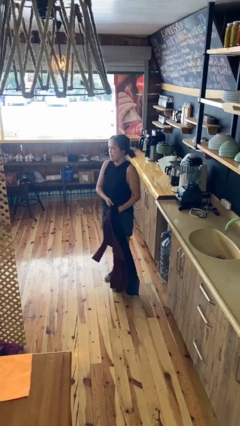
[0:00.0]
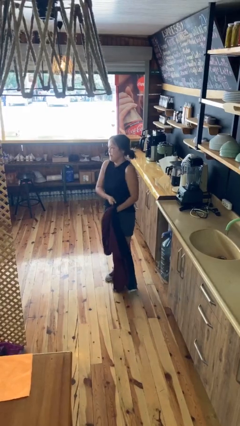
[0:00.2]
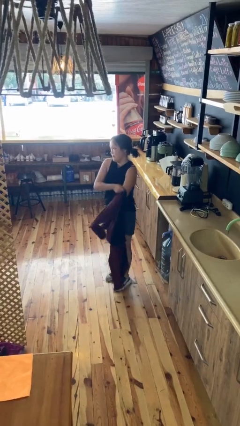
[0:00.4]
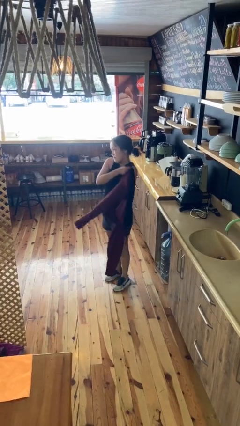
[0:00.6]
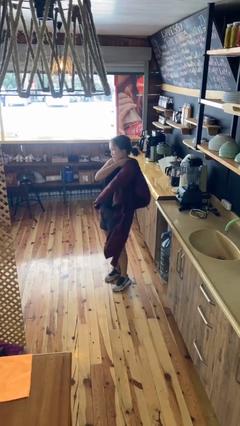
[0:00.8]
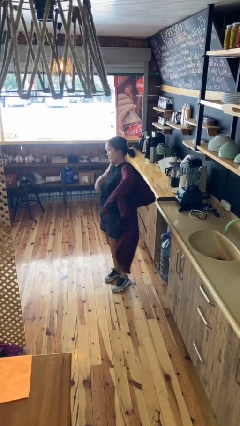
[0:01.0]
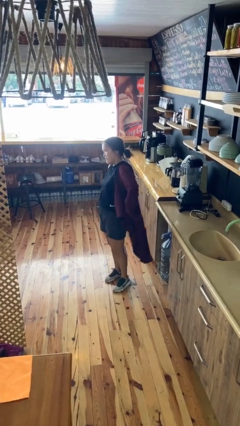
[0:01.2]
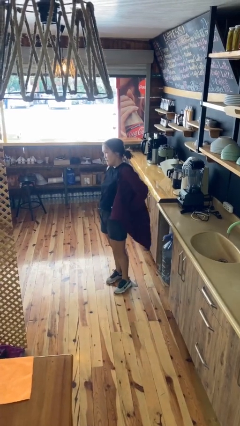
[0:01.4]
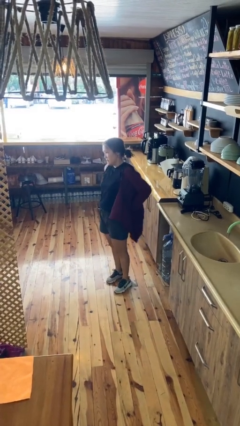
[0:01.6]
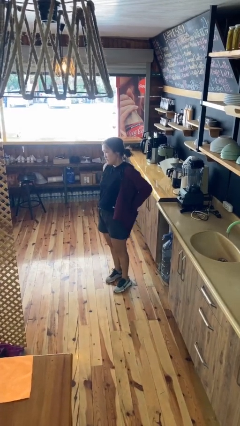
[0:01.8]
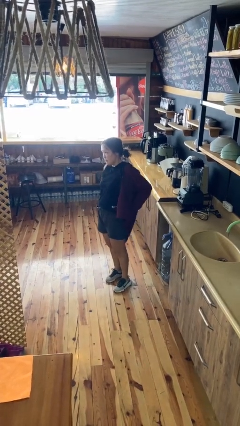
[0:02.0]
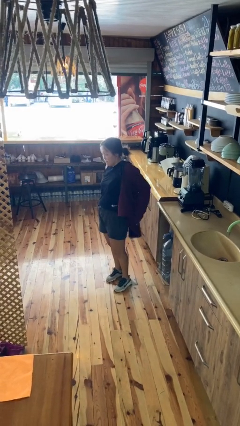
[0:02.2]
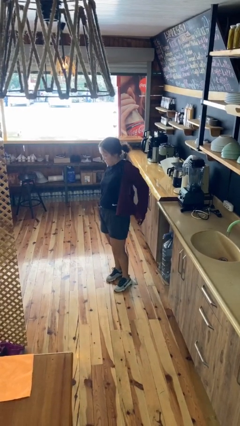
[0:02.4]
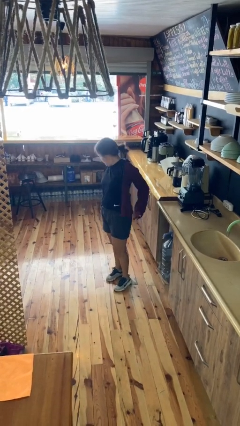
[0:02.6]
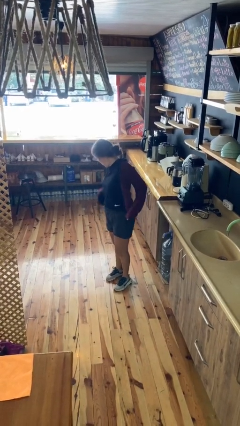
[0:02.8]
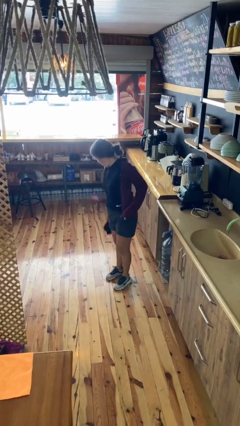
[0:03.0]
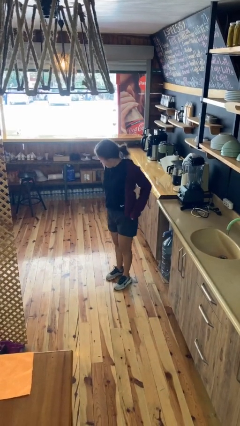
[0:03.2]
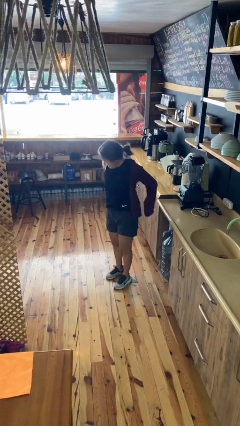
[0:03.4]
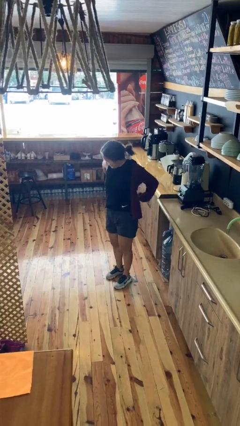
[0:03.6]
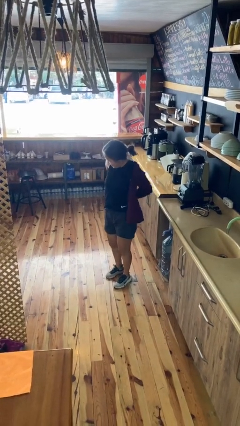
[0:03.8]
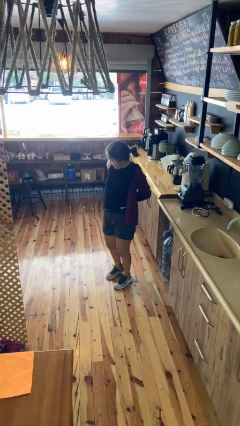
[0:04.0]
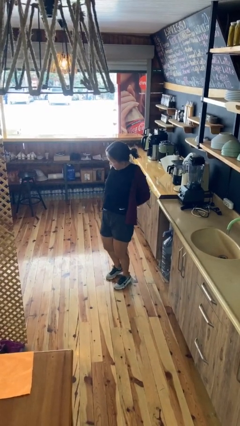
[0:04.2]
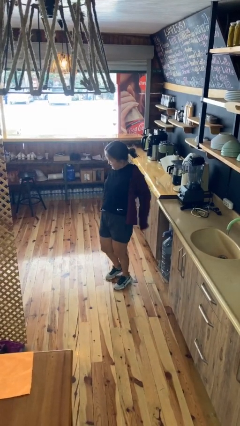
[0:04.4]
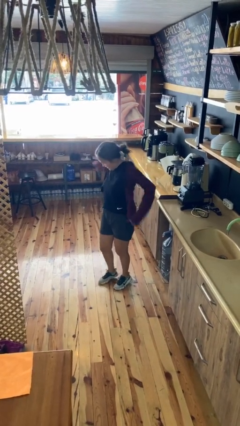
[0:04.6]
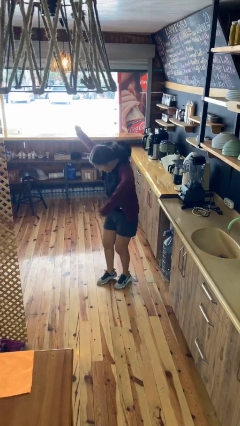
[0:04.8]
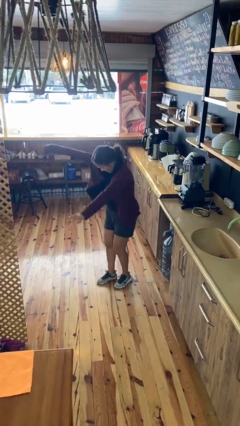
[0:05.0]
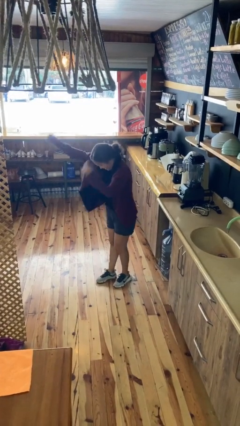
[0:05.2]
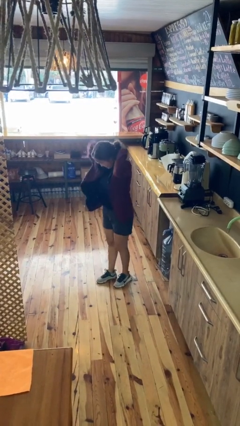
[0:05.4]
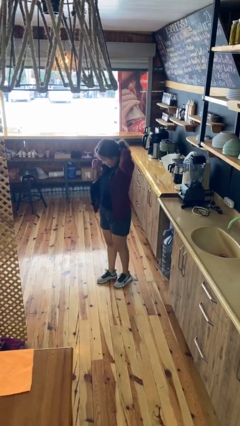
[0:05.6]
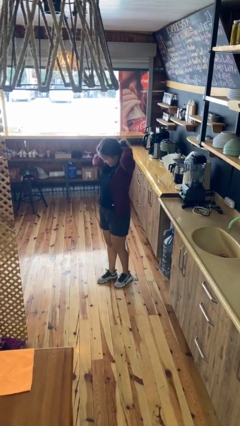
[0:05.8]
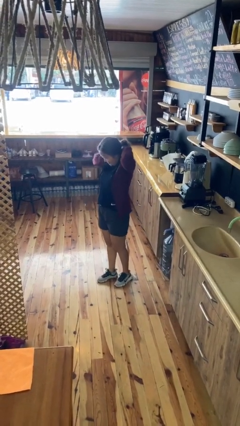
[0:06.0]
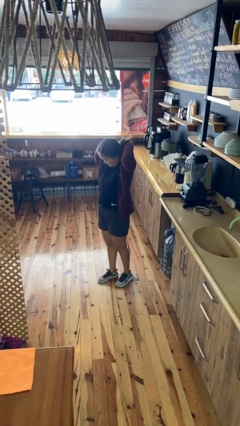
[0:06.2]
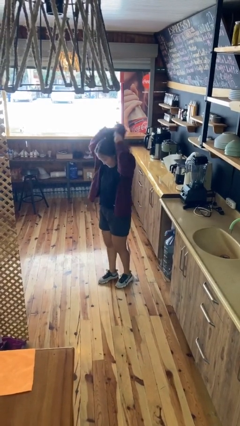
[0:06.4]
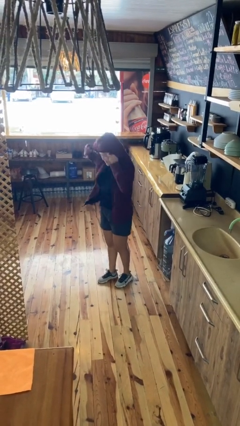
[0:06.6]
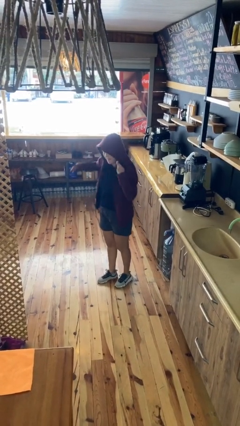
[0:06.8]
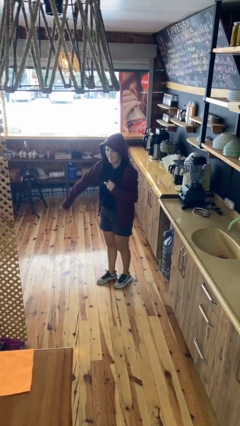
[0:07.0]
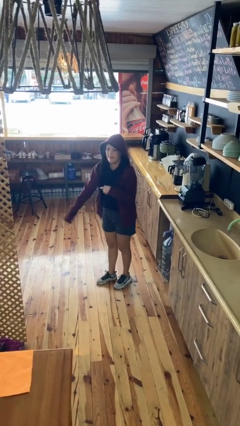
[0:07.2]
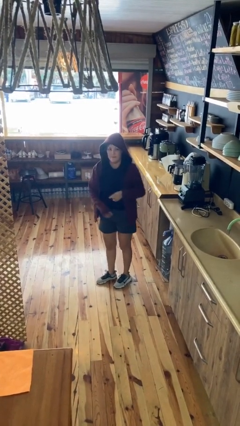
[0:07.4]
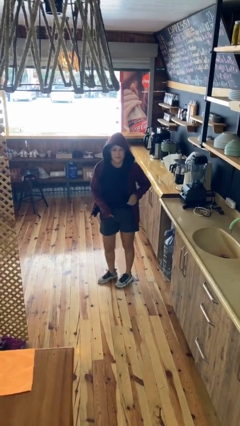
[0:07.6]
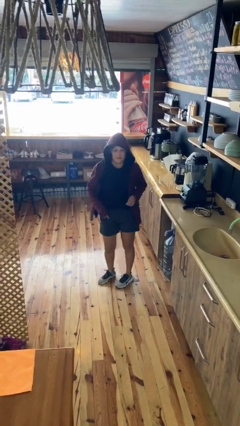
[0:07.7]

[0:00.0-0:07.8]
person puts on hoodie

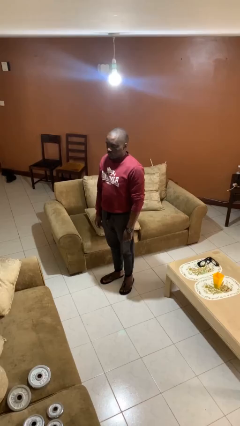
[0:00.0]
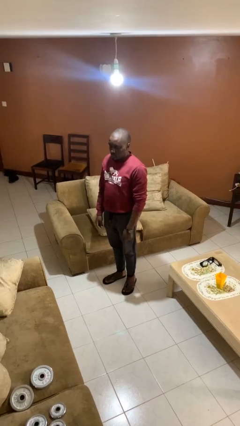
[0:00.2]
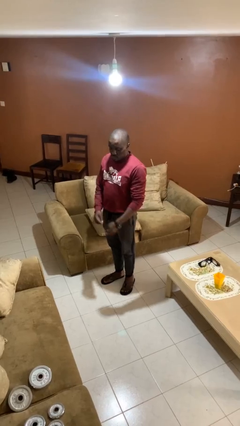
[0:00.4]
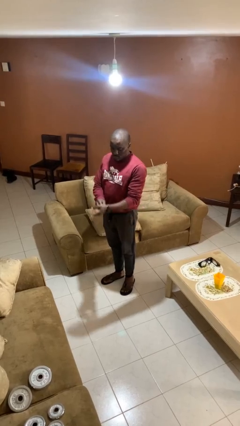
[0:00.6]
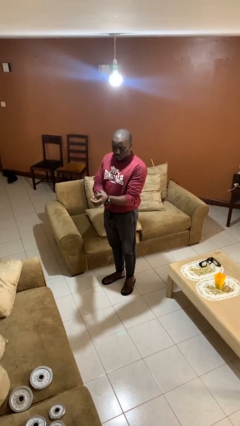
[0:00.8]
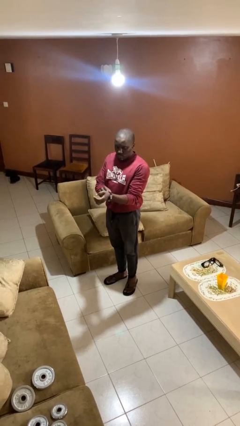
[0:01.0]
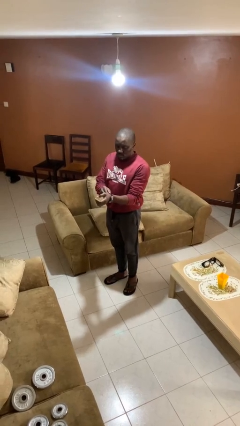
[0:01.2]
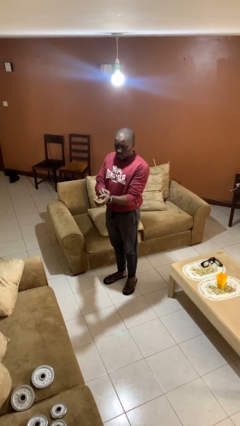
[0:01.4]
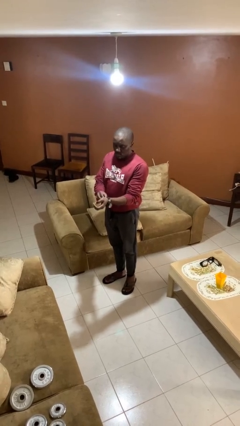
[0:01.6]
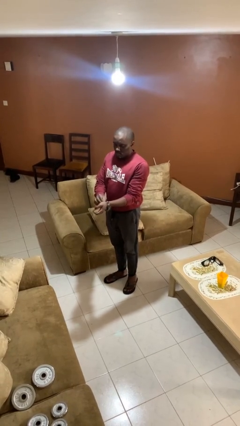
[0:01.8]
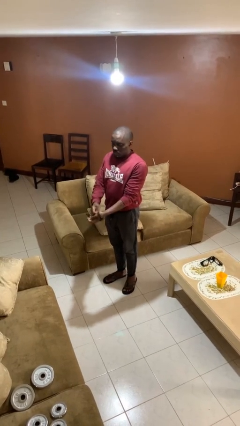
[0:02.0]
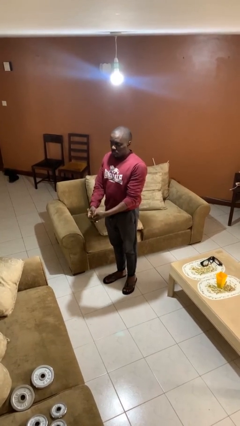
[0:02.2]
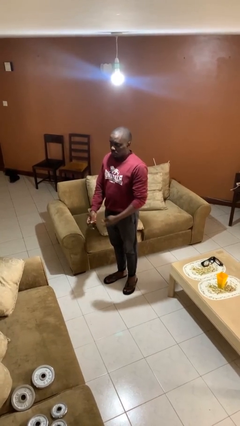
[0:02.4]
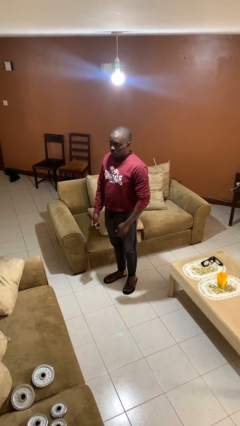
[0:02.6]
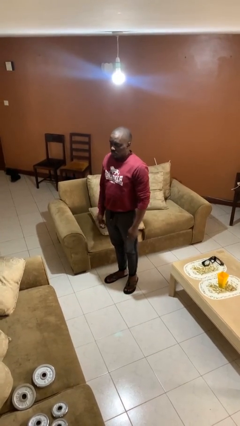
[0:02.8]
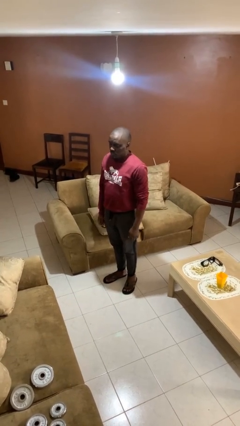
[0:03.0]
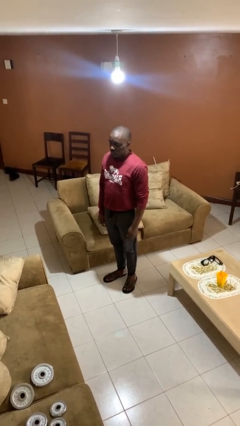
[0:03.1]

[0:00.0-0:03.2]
person takes off wristwatch

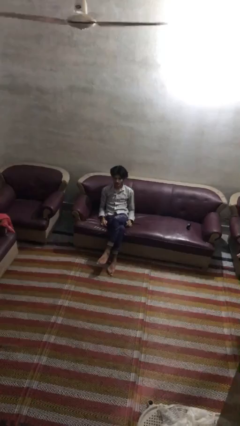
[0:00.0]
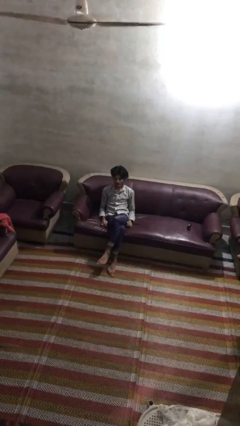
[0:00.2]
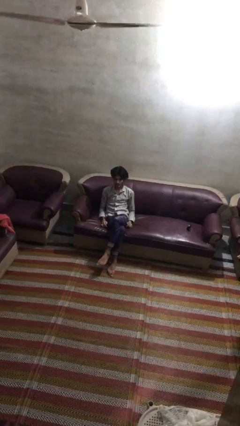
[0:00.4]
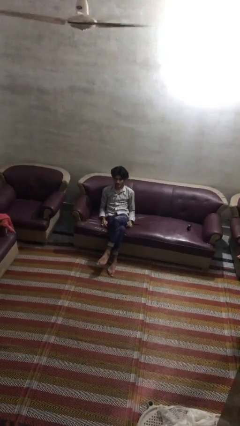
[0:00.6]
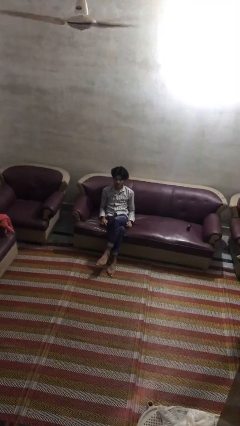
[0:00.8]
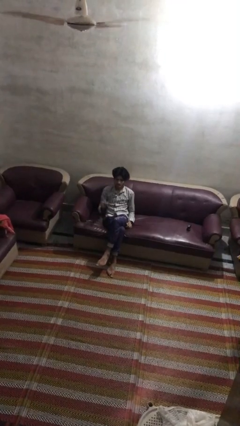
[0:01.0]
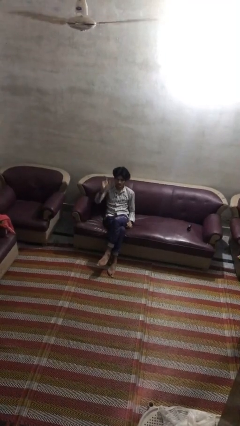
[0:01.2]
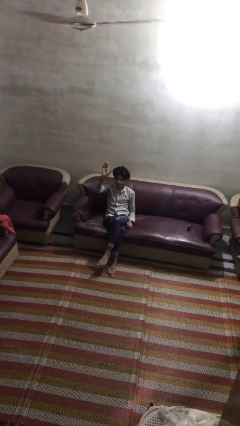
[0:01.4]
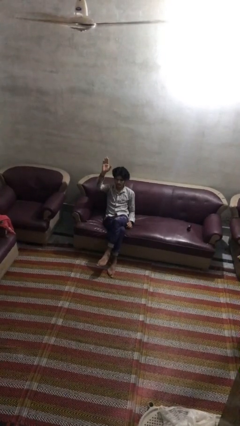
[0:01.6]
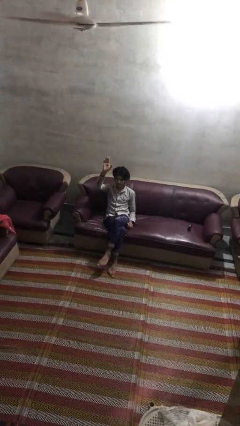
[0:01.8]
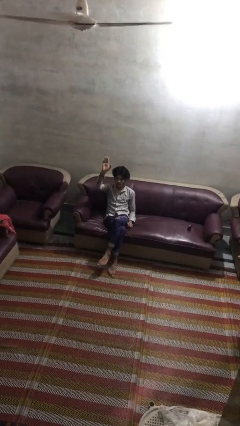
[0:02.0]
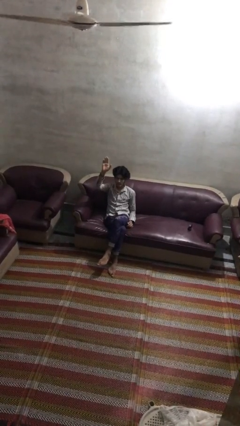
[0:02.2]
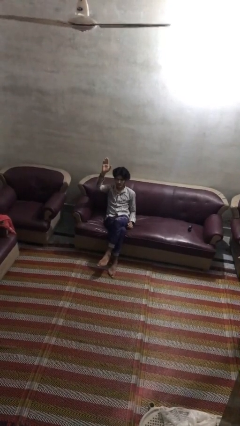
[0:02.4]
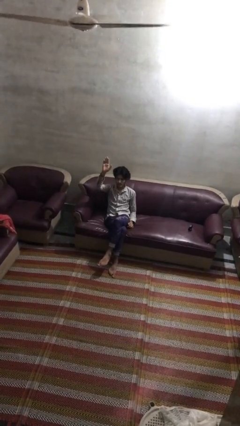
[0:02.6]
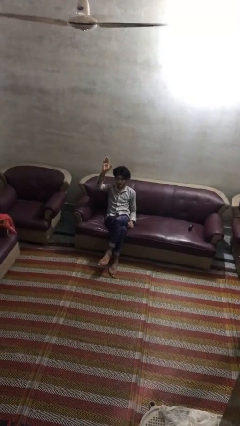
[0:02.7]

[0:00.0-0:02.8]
person gestures raise hand

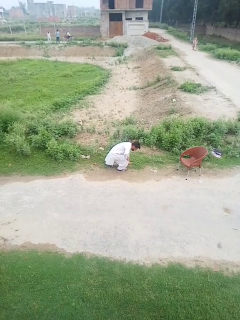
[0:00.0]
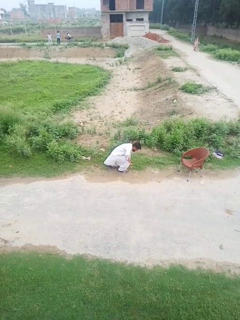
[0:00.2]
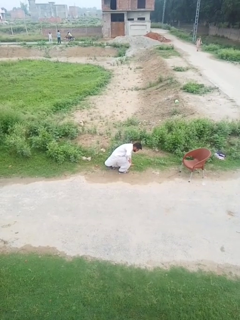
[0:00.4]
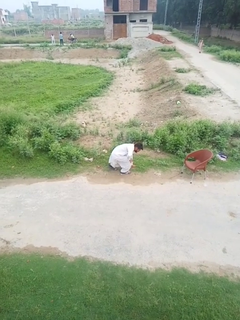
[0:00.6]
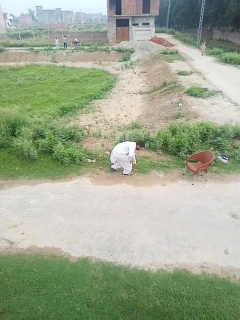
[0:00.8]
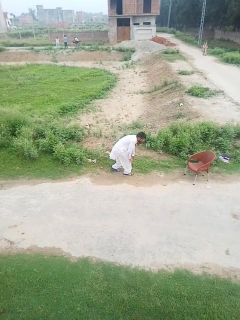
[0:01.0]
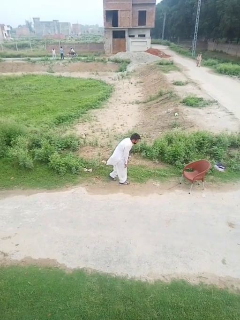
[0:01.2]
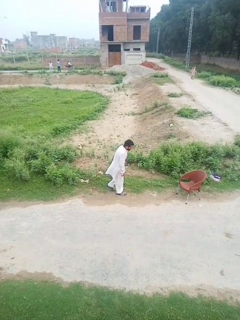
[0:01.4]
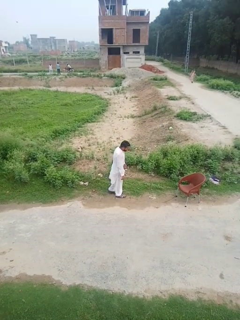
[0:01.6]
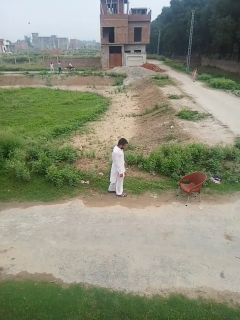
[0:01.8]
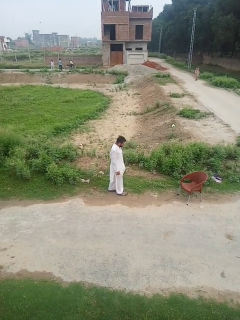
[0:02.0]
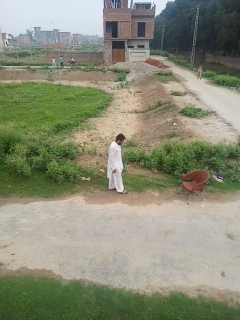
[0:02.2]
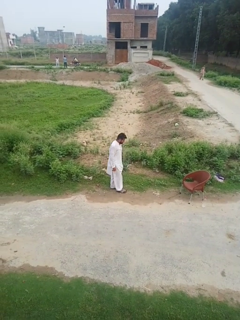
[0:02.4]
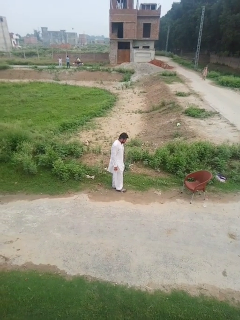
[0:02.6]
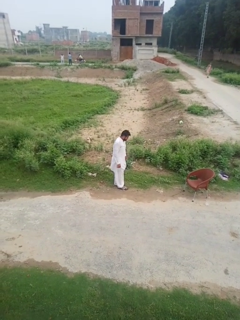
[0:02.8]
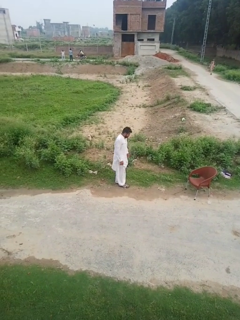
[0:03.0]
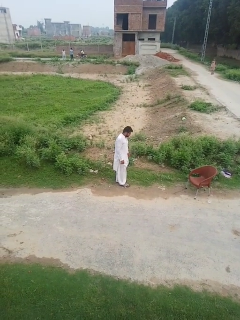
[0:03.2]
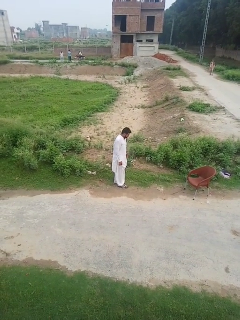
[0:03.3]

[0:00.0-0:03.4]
person stands up from floor

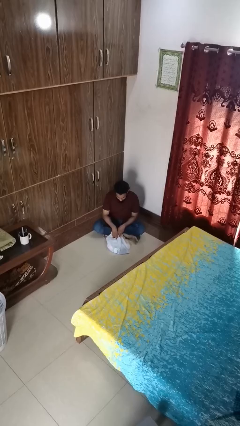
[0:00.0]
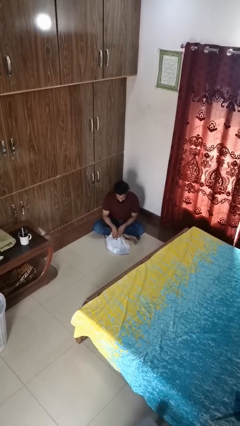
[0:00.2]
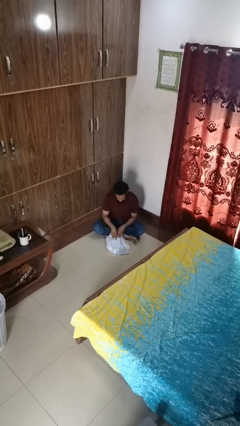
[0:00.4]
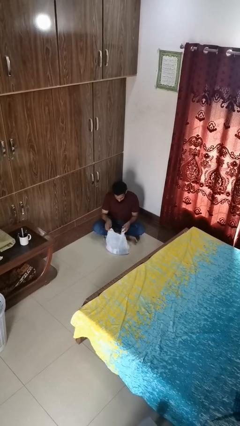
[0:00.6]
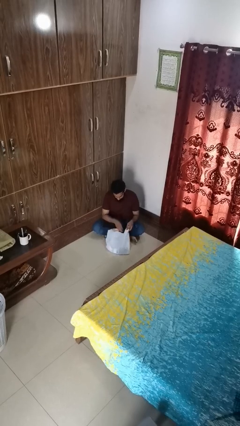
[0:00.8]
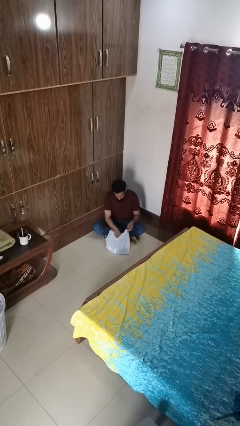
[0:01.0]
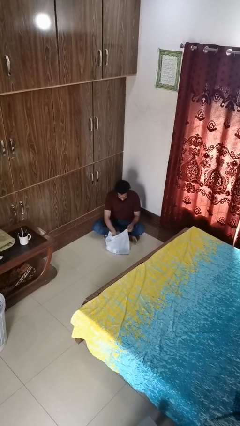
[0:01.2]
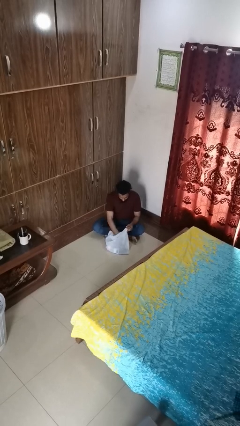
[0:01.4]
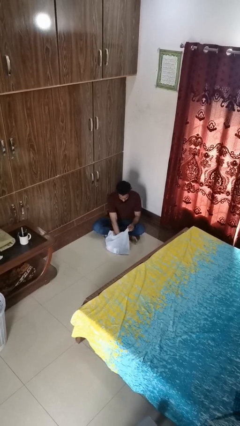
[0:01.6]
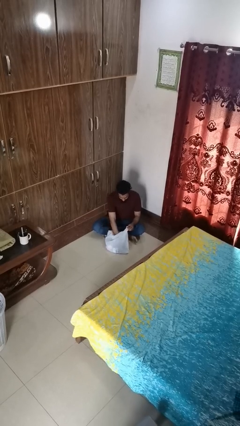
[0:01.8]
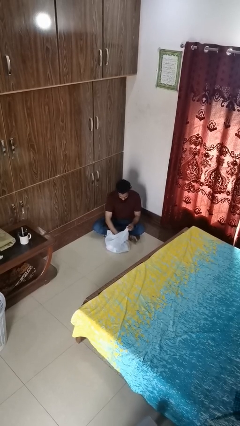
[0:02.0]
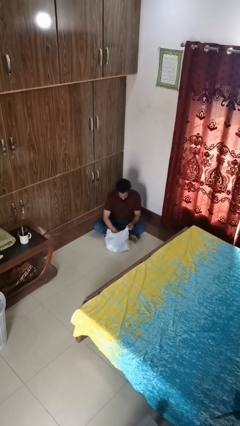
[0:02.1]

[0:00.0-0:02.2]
person searches in bag
